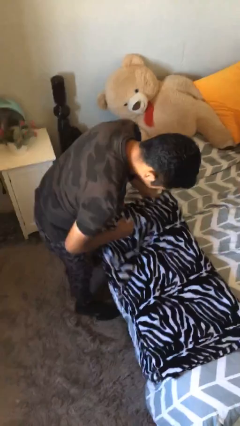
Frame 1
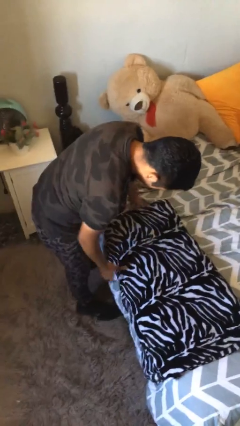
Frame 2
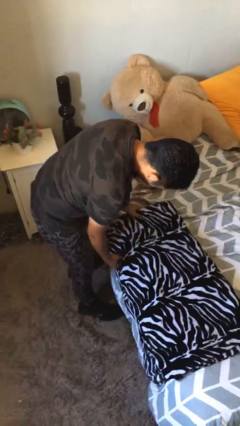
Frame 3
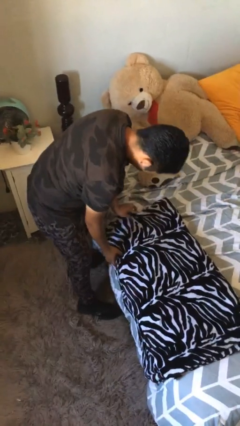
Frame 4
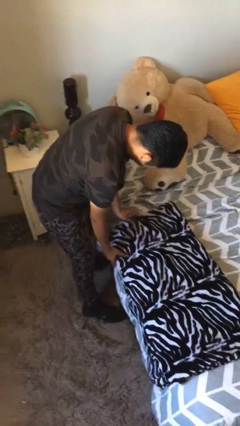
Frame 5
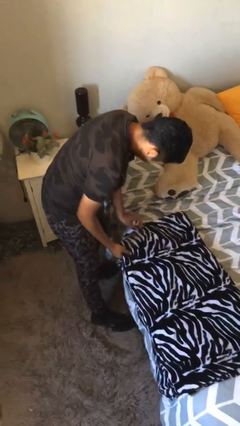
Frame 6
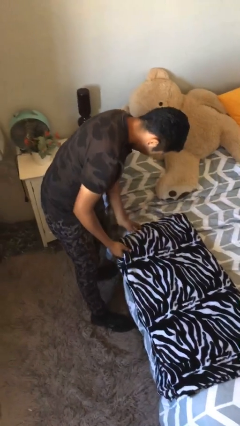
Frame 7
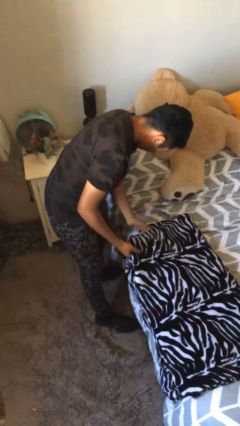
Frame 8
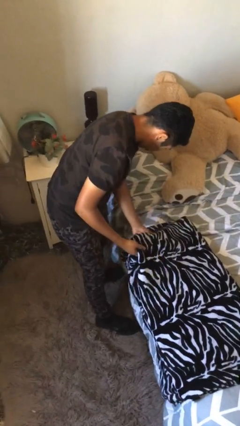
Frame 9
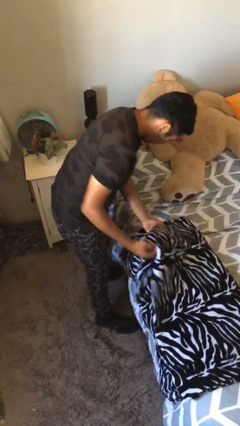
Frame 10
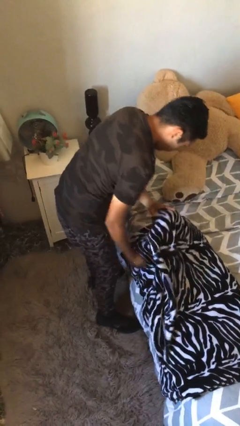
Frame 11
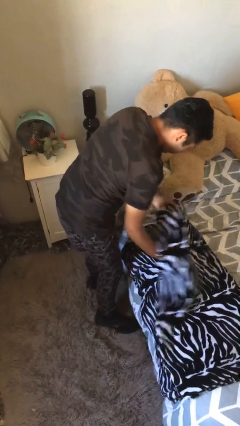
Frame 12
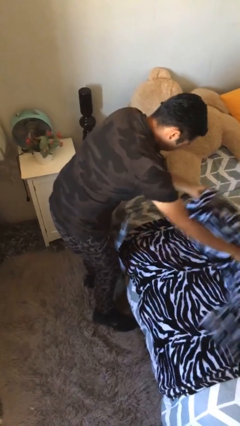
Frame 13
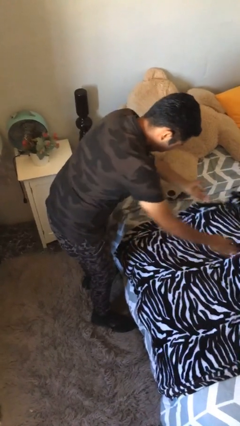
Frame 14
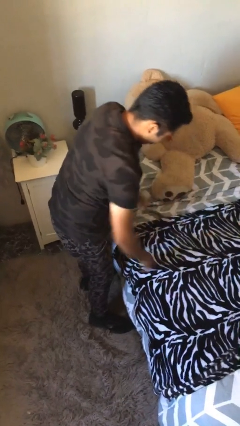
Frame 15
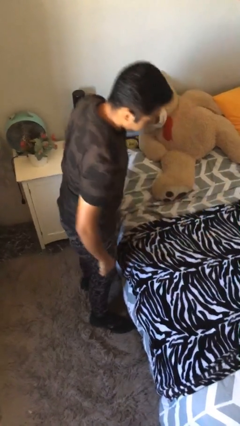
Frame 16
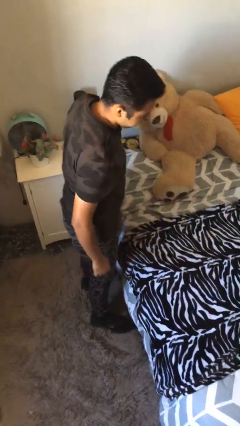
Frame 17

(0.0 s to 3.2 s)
person unfolds blanket

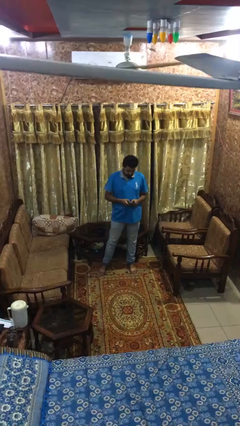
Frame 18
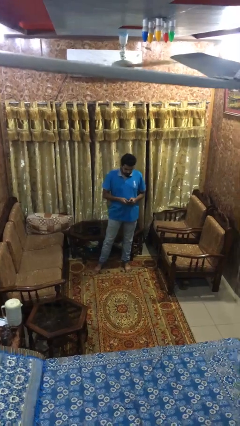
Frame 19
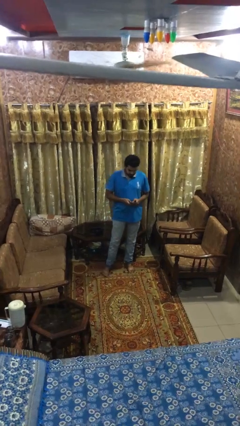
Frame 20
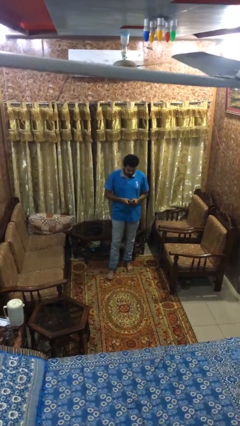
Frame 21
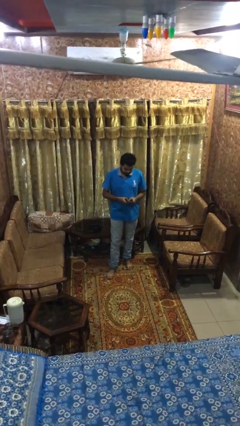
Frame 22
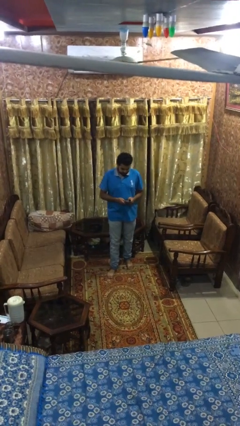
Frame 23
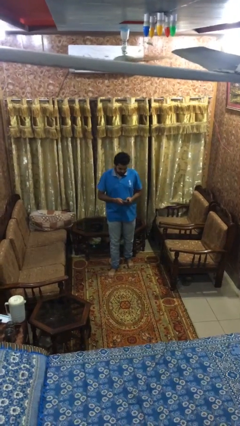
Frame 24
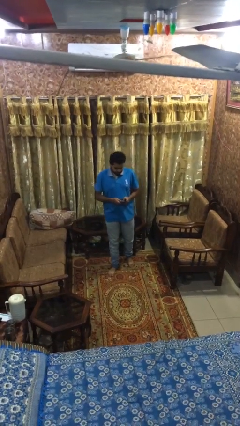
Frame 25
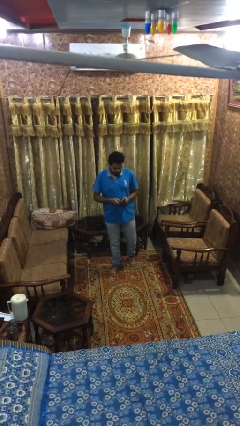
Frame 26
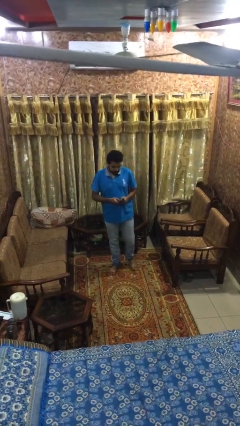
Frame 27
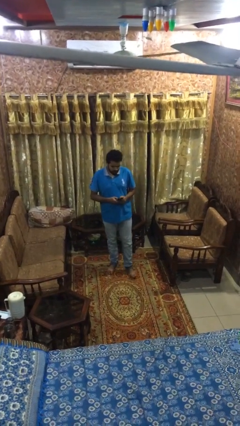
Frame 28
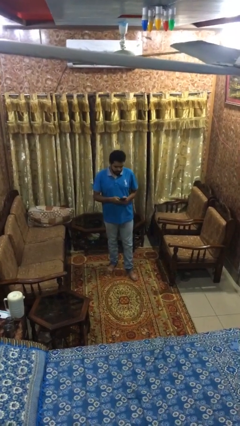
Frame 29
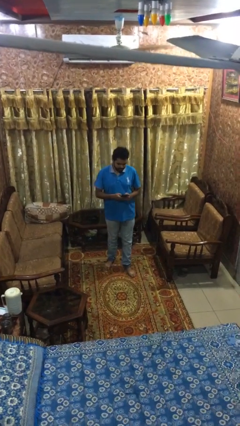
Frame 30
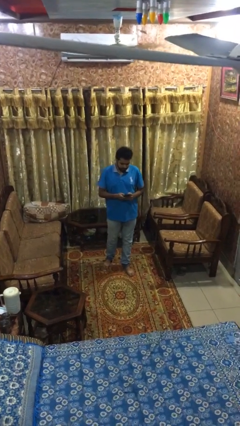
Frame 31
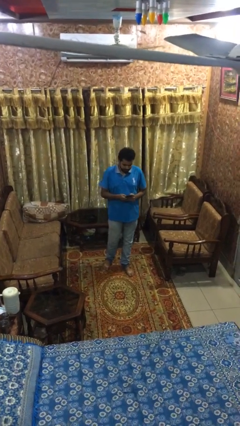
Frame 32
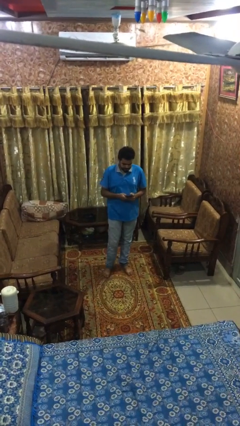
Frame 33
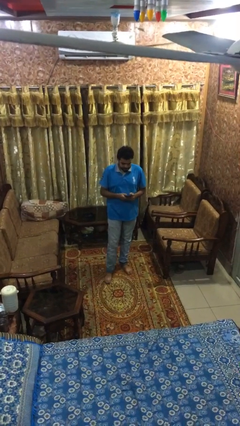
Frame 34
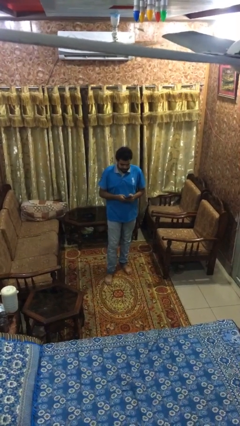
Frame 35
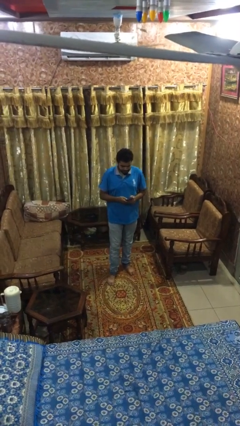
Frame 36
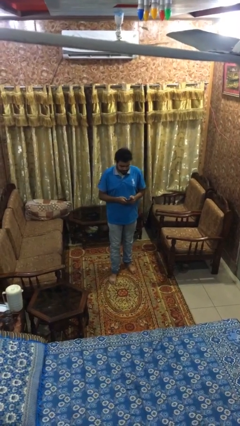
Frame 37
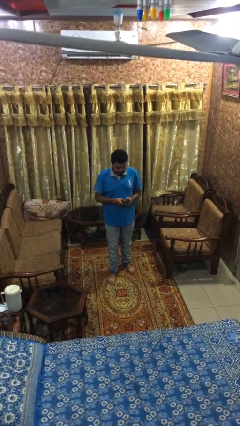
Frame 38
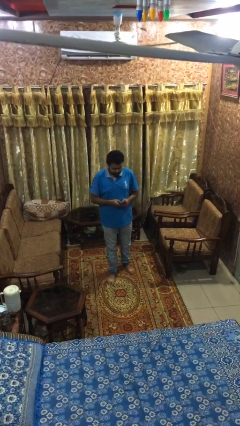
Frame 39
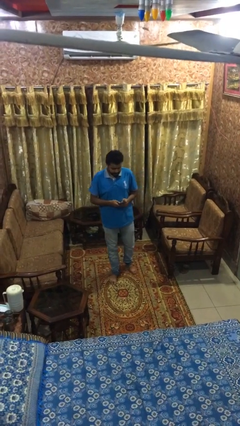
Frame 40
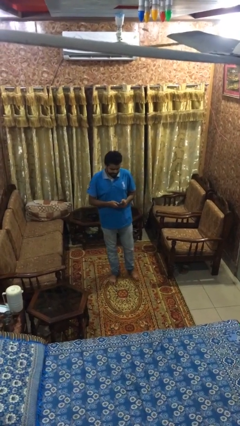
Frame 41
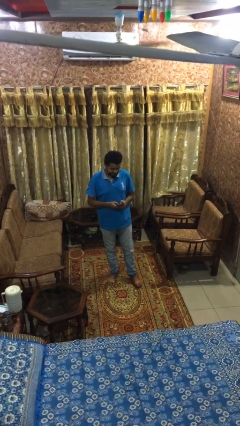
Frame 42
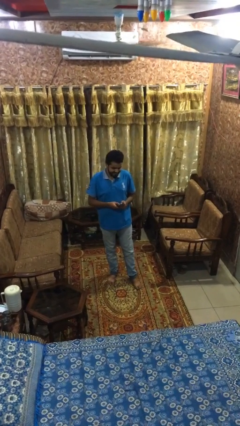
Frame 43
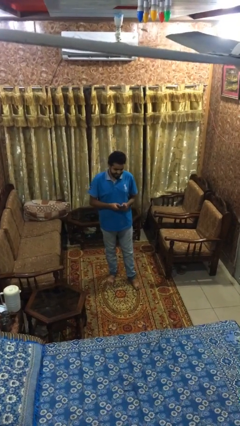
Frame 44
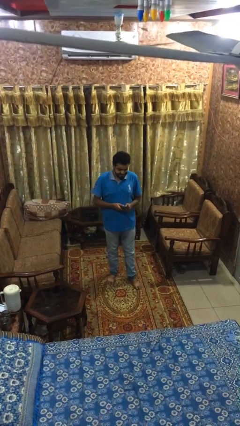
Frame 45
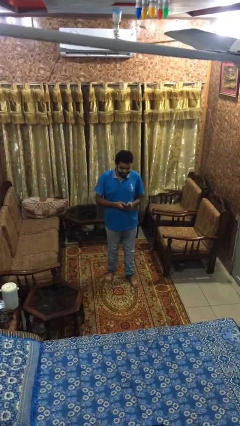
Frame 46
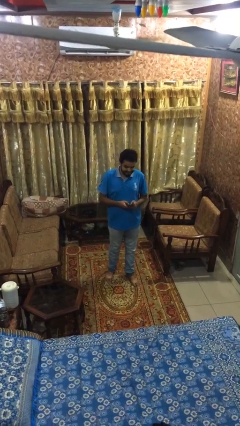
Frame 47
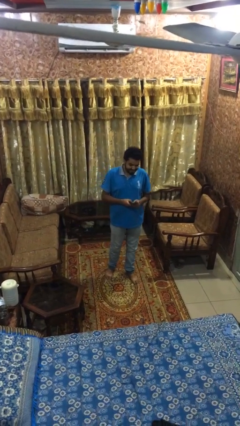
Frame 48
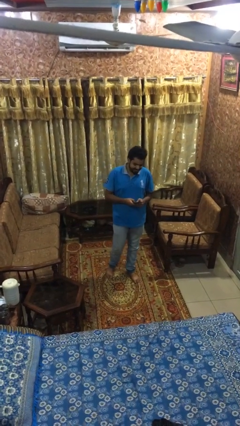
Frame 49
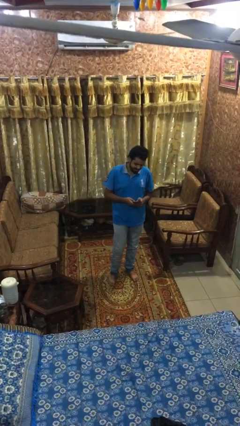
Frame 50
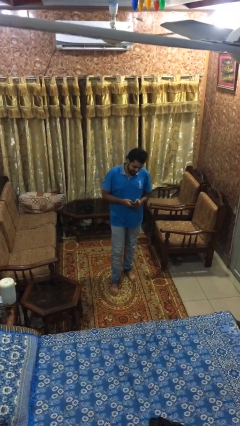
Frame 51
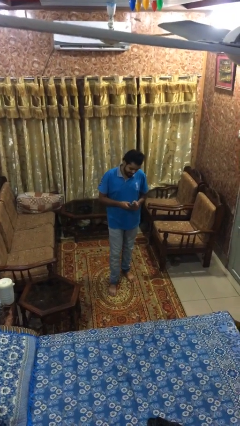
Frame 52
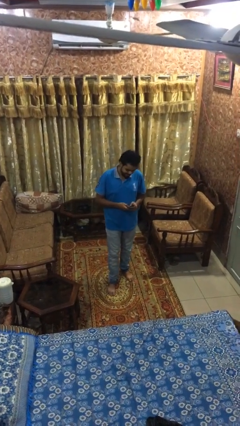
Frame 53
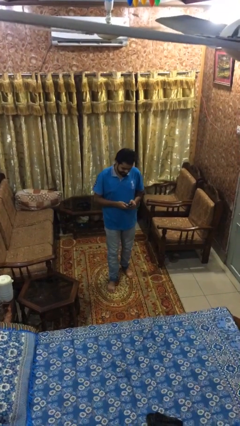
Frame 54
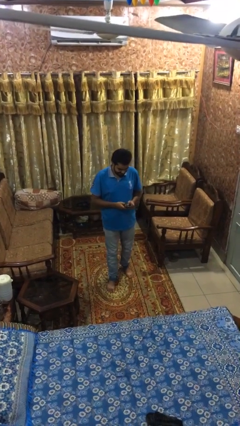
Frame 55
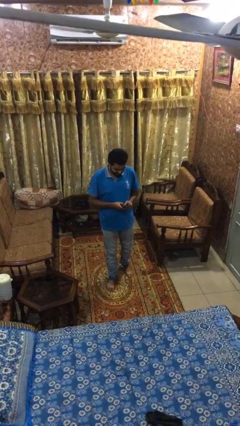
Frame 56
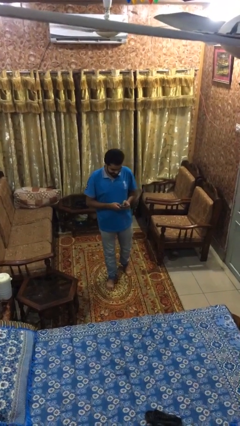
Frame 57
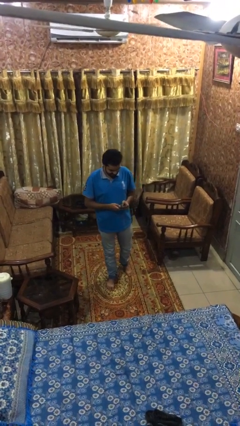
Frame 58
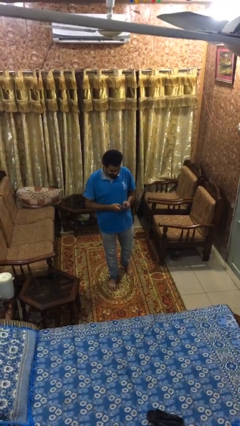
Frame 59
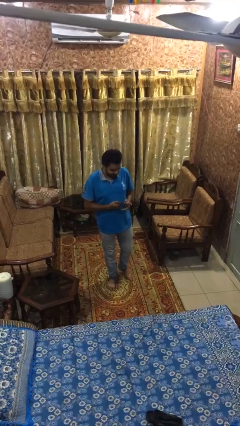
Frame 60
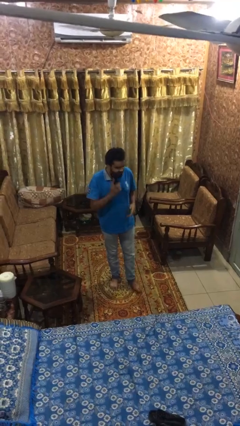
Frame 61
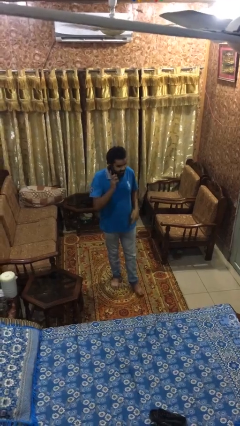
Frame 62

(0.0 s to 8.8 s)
person texts on phone

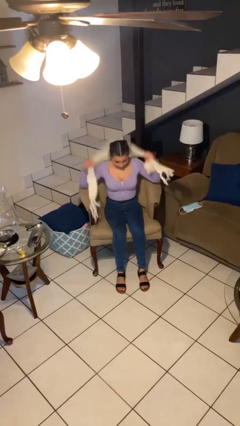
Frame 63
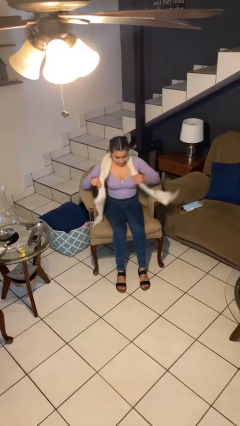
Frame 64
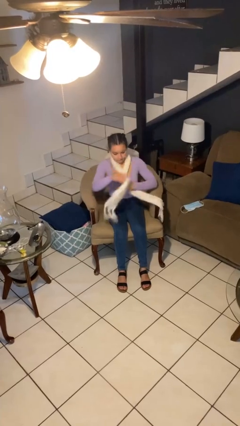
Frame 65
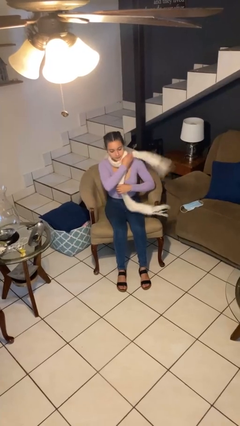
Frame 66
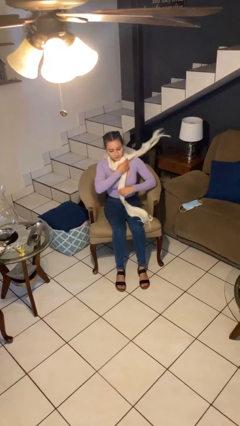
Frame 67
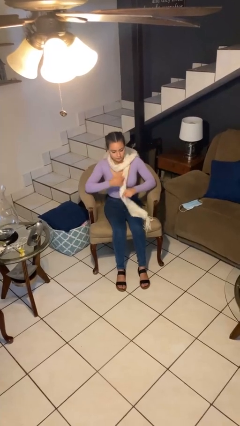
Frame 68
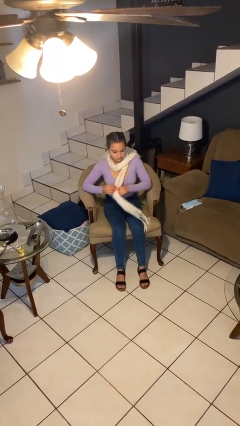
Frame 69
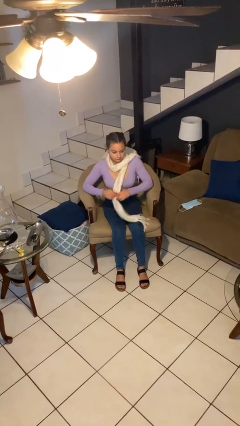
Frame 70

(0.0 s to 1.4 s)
person puts on scarf

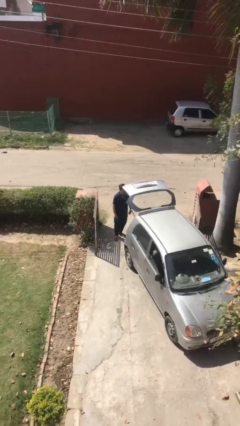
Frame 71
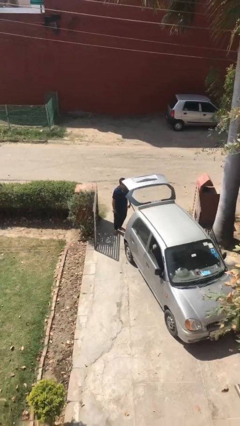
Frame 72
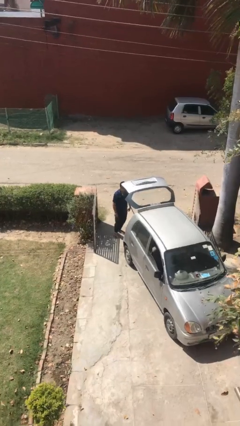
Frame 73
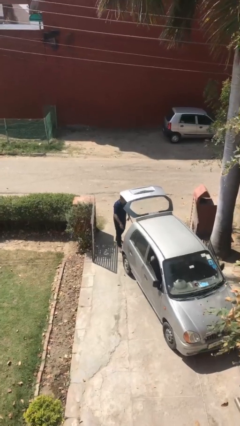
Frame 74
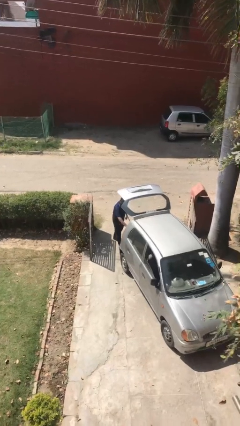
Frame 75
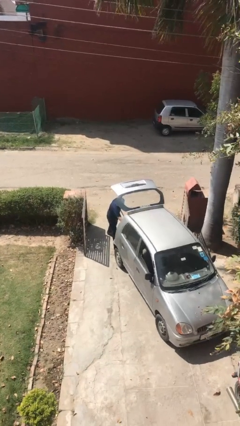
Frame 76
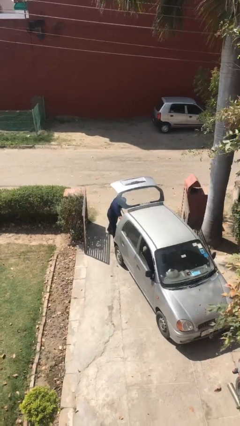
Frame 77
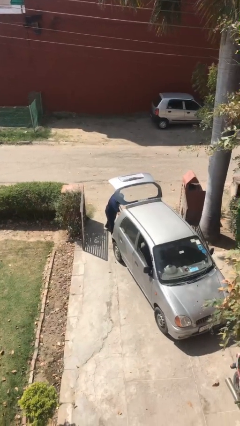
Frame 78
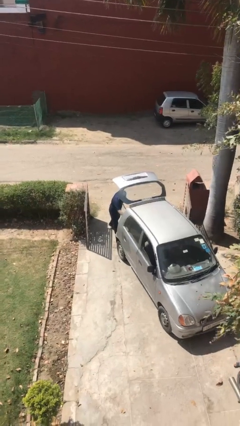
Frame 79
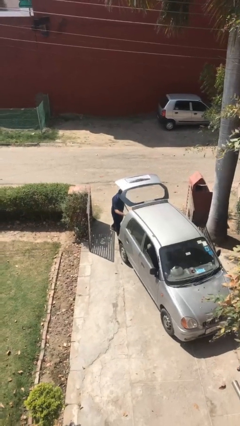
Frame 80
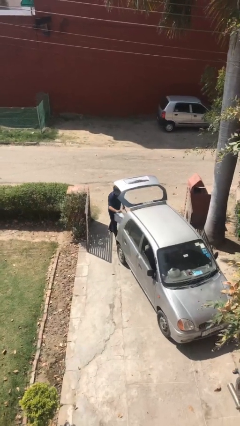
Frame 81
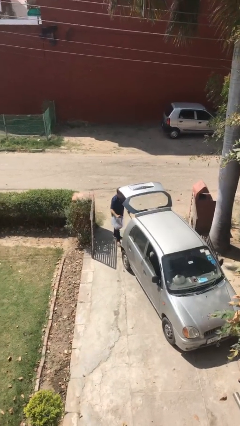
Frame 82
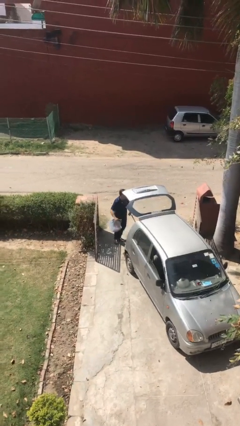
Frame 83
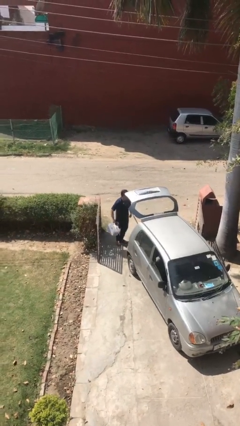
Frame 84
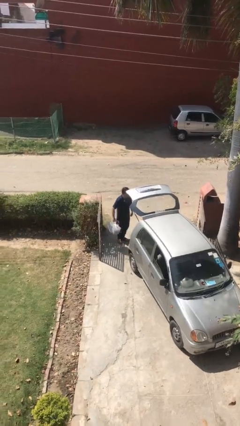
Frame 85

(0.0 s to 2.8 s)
person unloads car

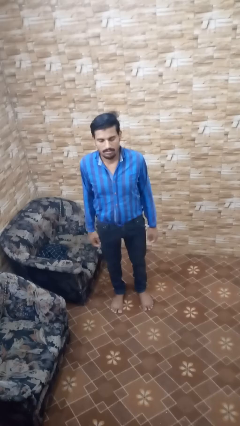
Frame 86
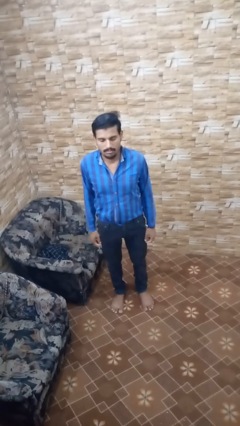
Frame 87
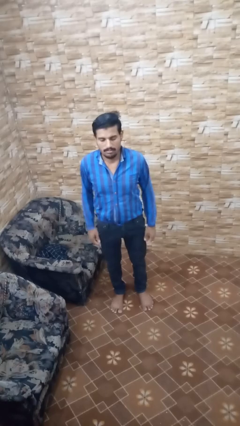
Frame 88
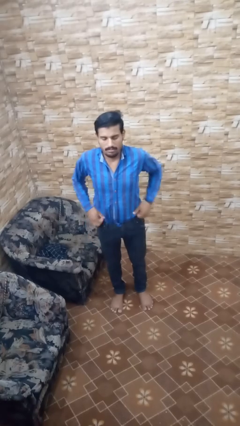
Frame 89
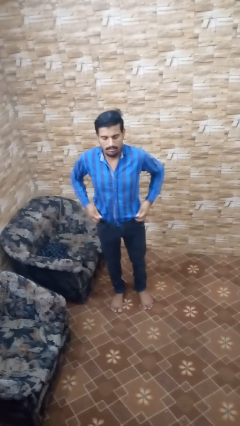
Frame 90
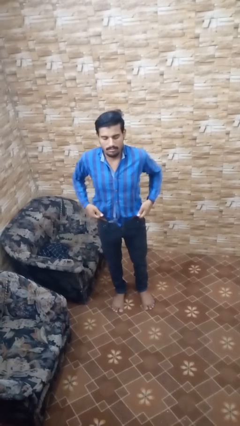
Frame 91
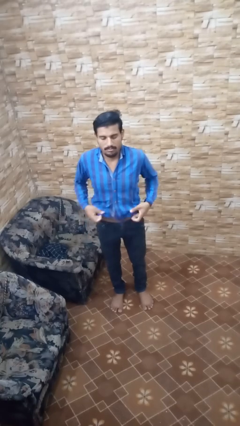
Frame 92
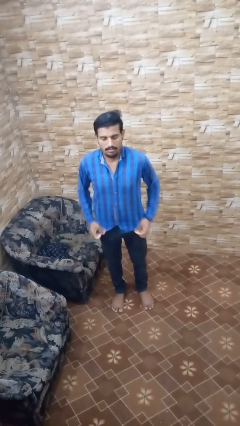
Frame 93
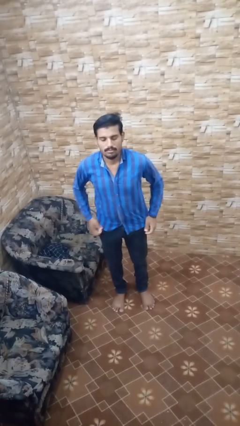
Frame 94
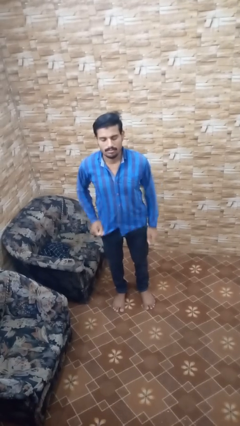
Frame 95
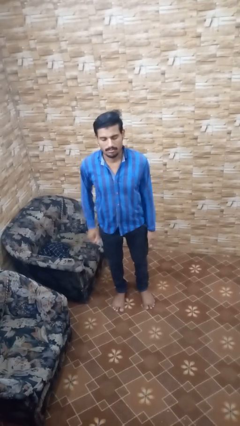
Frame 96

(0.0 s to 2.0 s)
person untucks shirt
